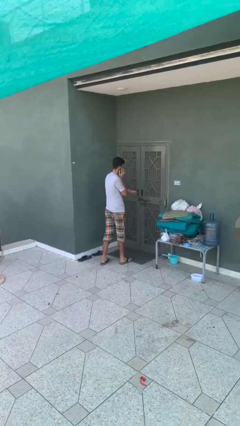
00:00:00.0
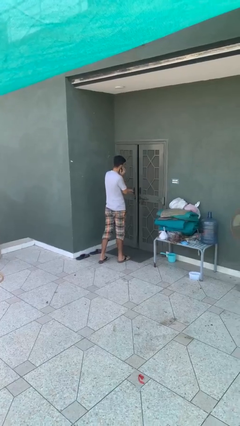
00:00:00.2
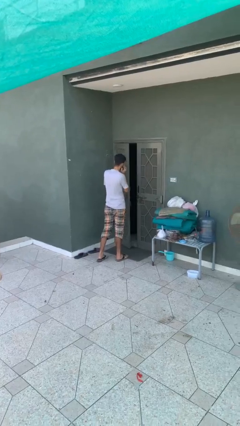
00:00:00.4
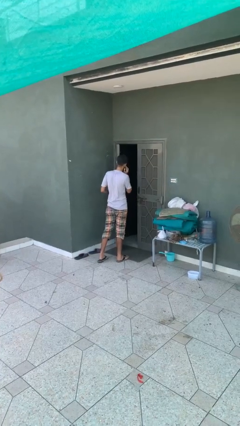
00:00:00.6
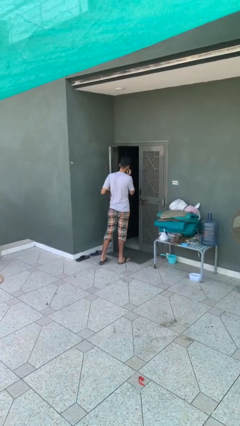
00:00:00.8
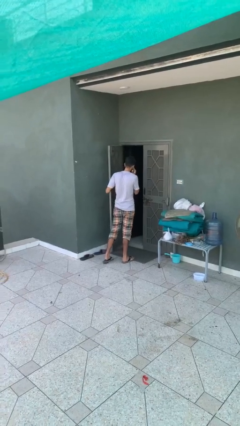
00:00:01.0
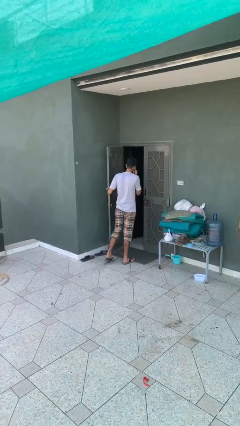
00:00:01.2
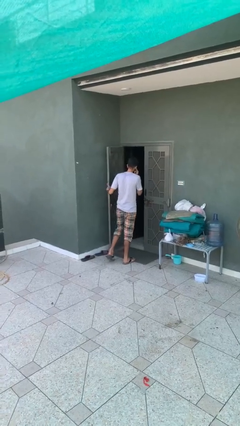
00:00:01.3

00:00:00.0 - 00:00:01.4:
person opens facility door

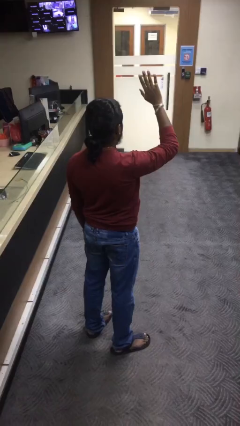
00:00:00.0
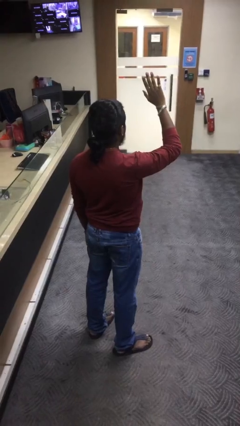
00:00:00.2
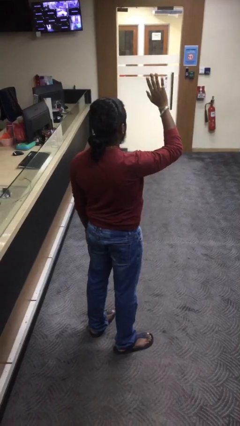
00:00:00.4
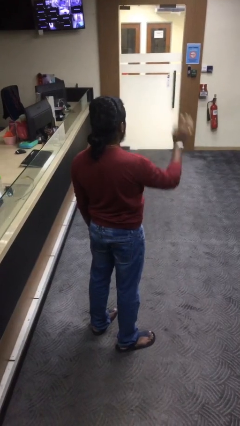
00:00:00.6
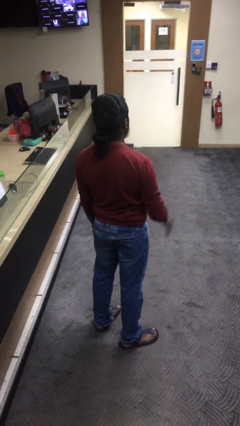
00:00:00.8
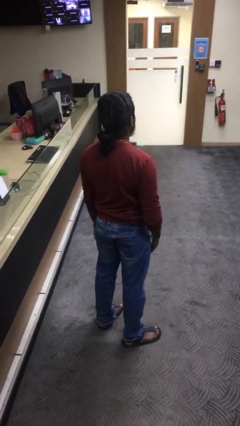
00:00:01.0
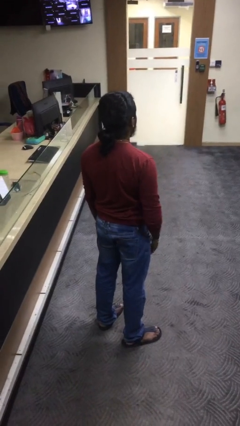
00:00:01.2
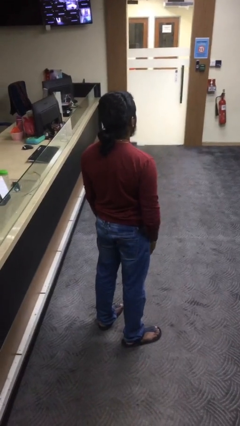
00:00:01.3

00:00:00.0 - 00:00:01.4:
person gestures lower hand

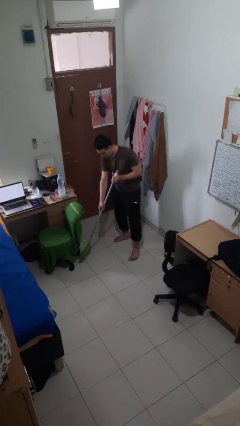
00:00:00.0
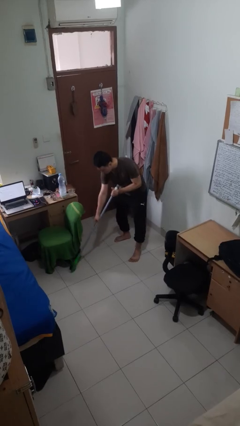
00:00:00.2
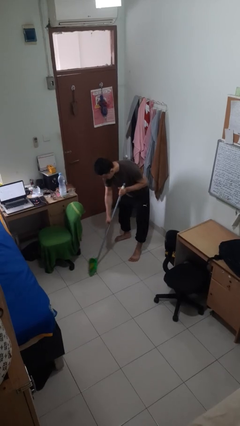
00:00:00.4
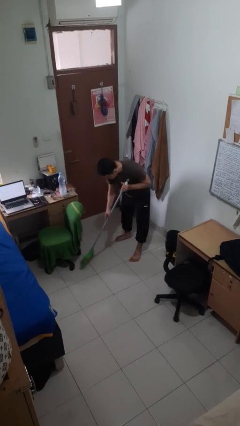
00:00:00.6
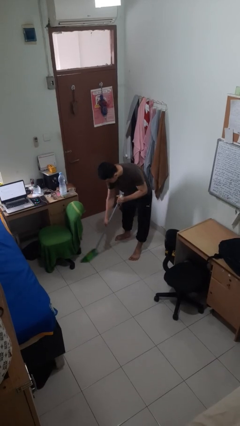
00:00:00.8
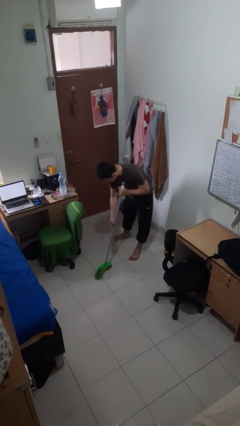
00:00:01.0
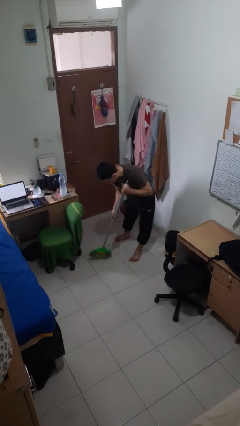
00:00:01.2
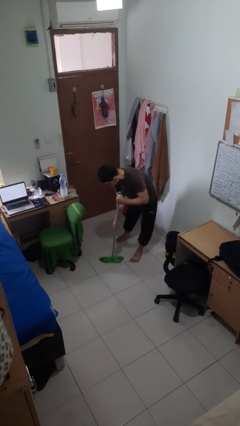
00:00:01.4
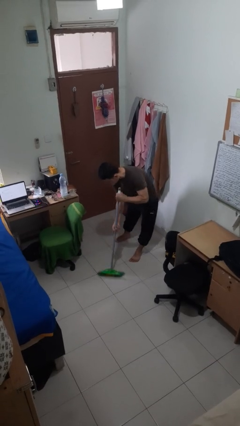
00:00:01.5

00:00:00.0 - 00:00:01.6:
person sweeps floor

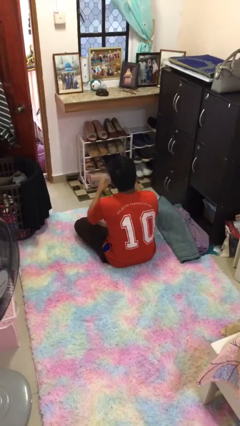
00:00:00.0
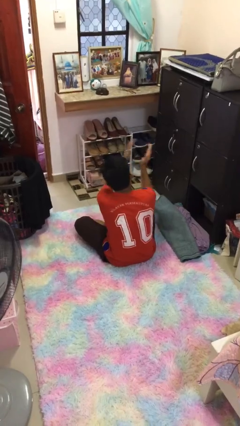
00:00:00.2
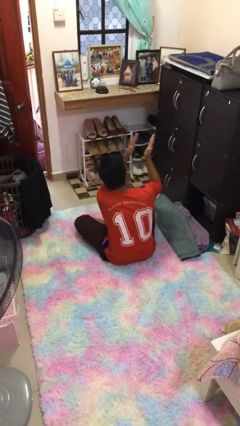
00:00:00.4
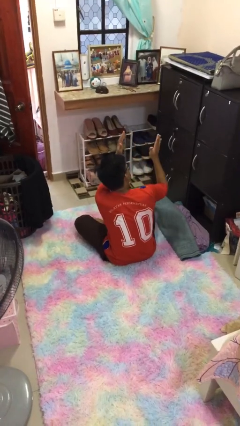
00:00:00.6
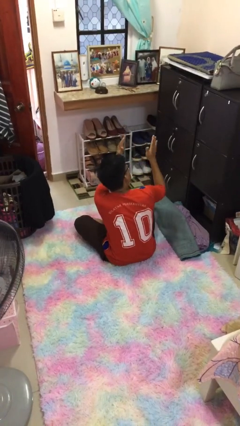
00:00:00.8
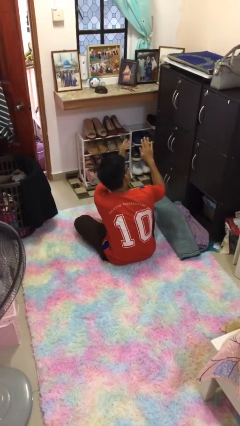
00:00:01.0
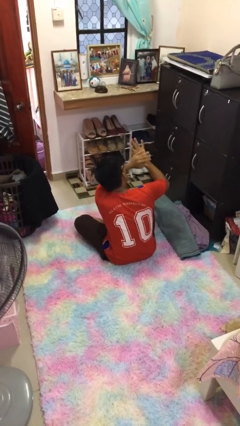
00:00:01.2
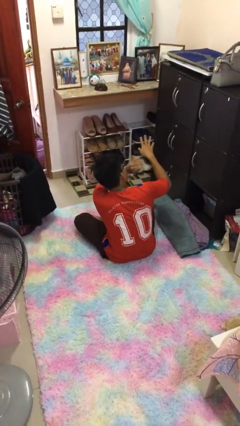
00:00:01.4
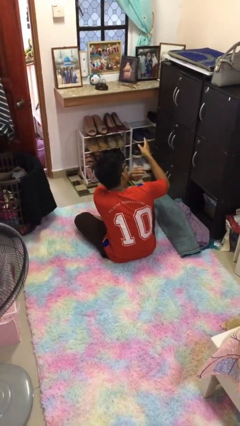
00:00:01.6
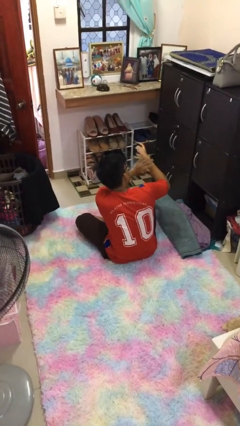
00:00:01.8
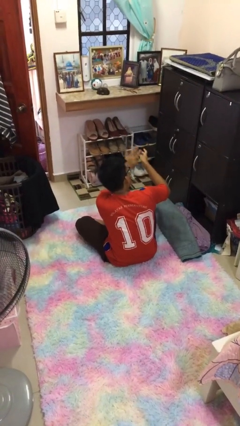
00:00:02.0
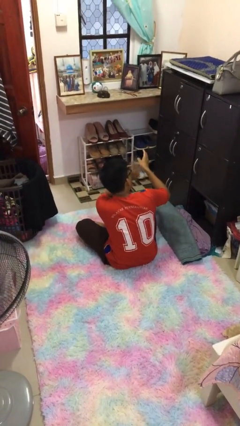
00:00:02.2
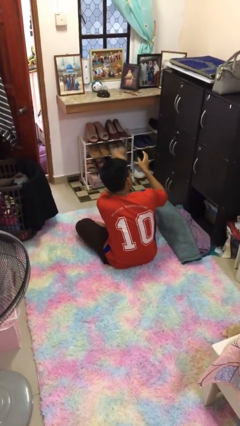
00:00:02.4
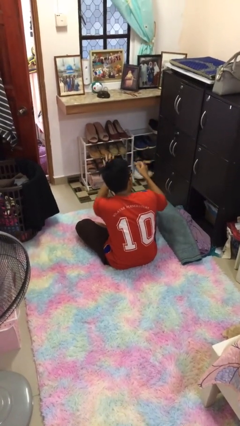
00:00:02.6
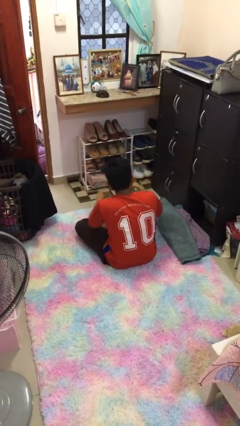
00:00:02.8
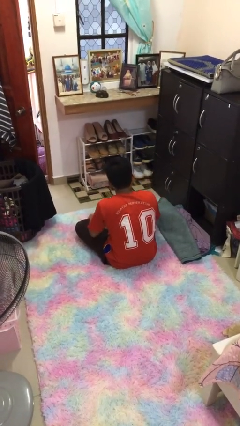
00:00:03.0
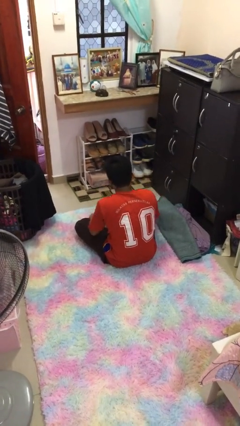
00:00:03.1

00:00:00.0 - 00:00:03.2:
person swats bug

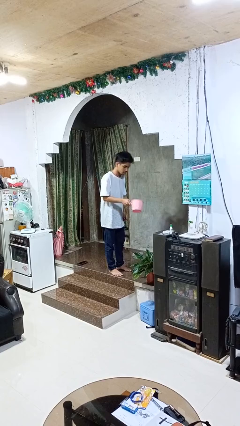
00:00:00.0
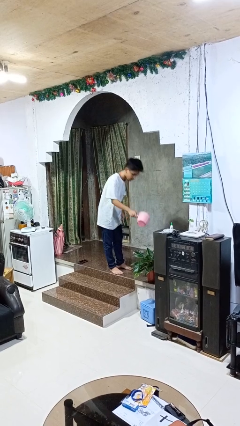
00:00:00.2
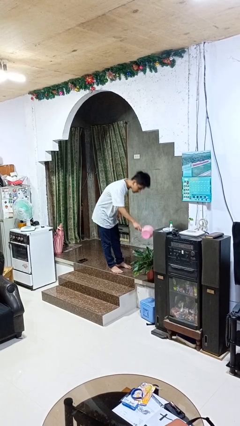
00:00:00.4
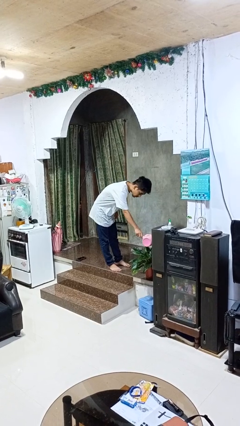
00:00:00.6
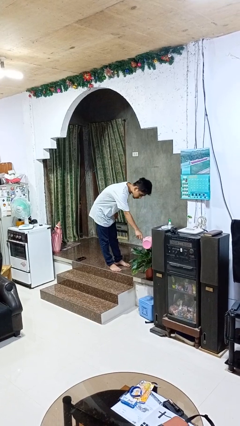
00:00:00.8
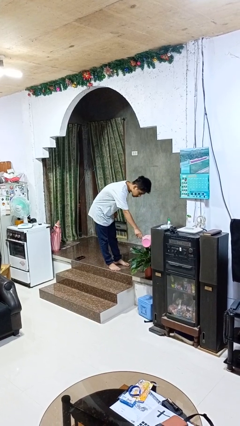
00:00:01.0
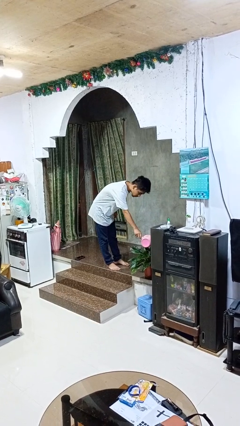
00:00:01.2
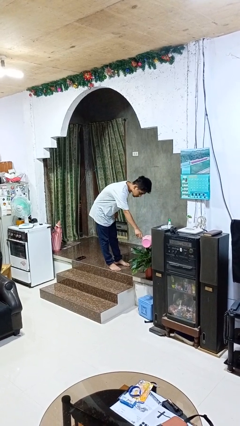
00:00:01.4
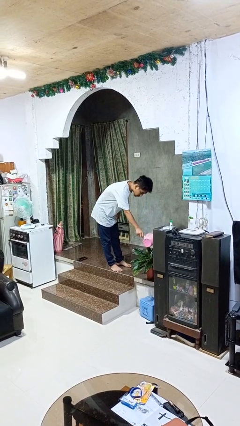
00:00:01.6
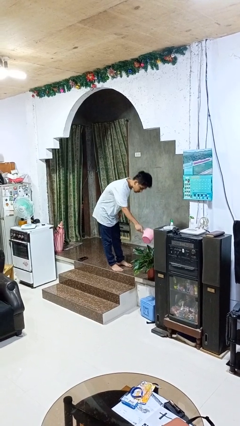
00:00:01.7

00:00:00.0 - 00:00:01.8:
person waters houseplant

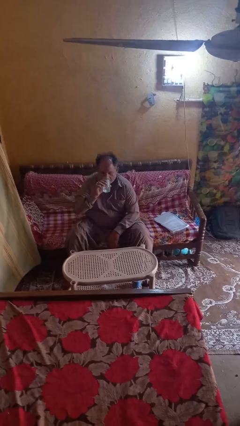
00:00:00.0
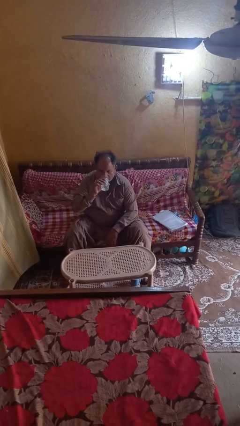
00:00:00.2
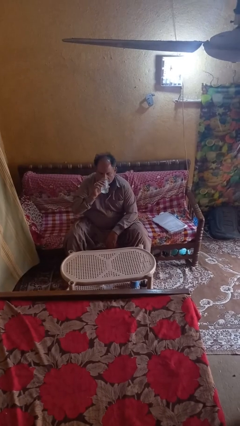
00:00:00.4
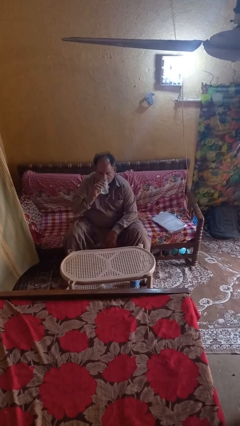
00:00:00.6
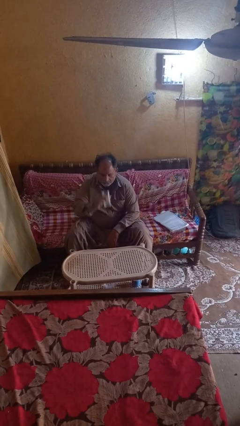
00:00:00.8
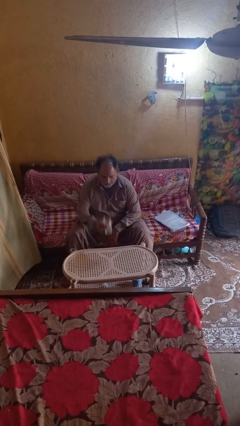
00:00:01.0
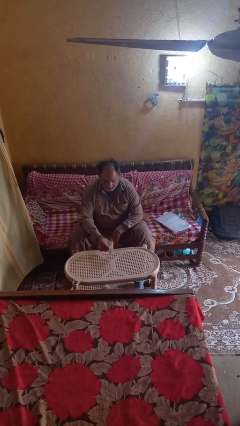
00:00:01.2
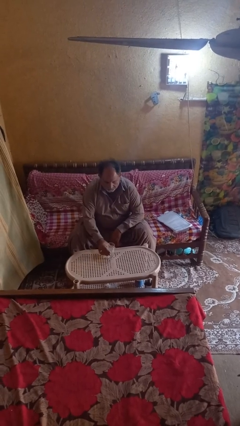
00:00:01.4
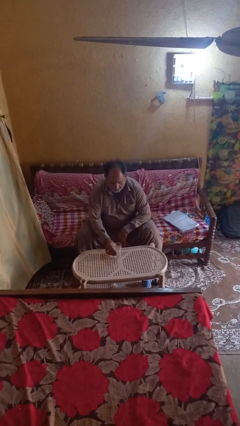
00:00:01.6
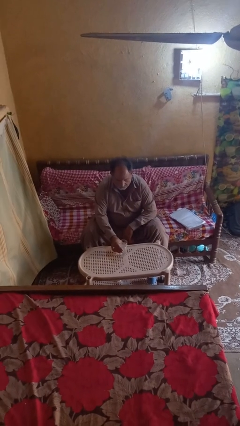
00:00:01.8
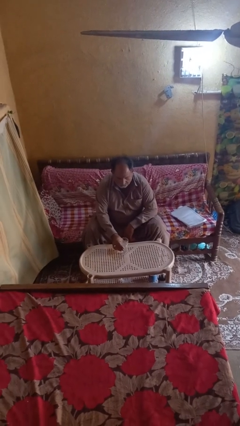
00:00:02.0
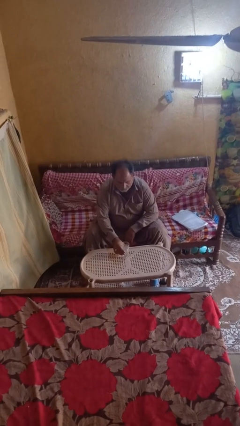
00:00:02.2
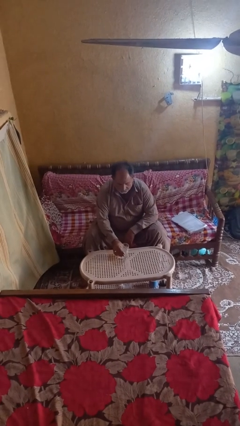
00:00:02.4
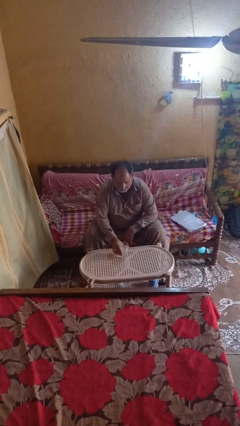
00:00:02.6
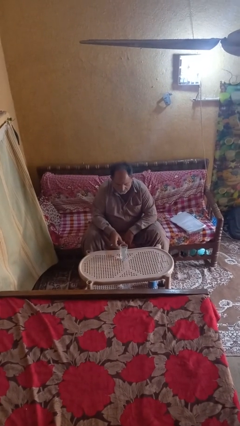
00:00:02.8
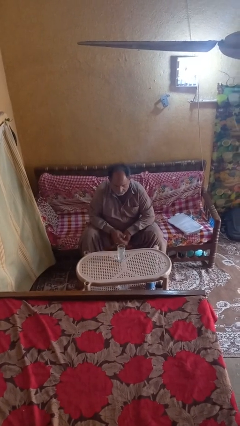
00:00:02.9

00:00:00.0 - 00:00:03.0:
person puts down object on table

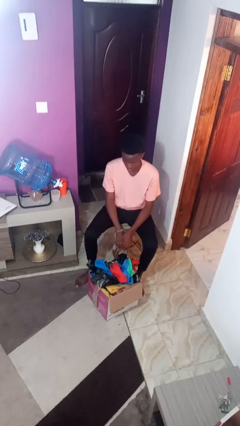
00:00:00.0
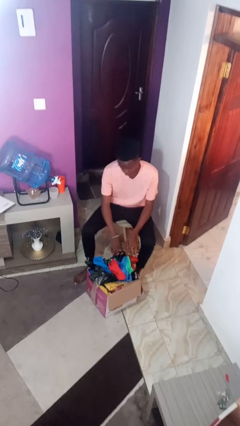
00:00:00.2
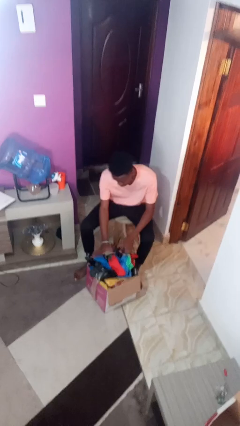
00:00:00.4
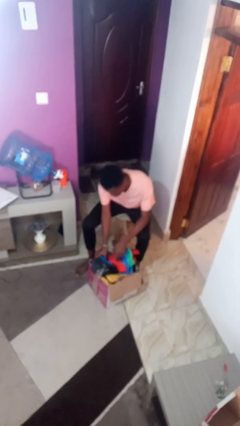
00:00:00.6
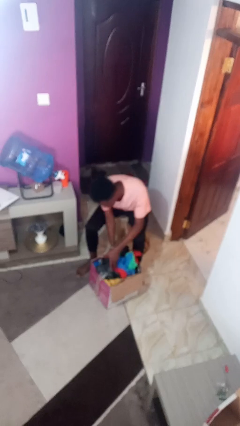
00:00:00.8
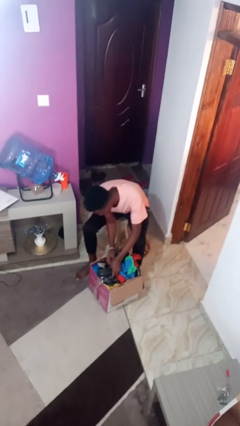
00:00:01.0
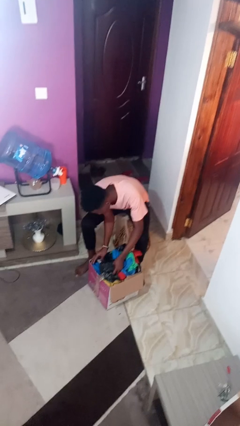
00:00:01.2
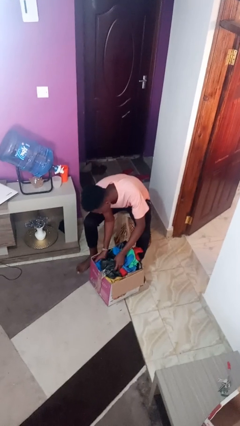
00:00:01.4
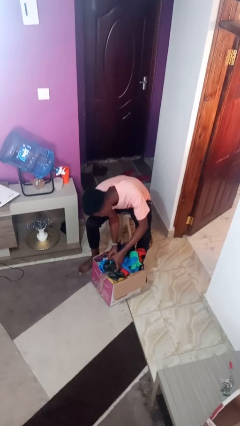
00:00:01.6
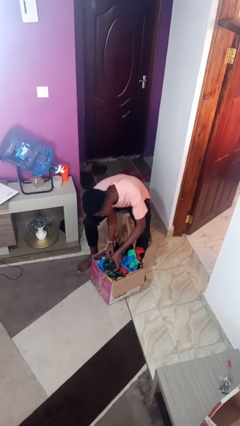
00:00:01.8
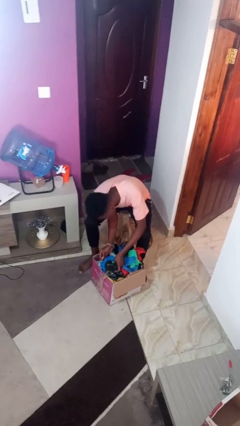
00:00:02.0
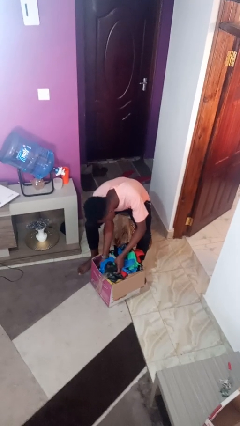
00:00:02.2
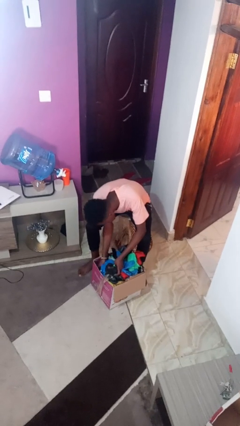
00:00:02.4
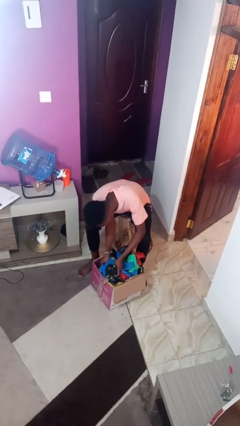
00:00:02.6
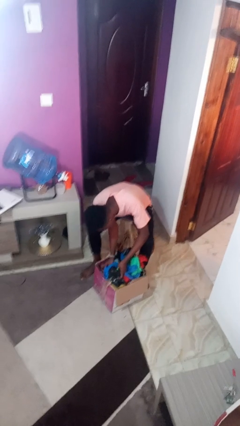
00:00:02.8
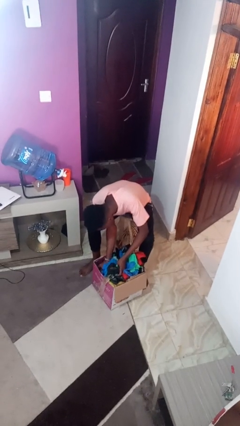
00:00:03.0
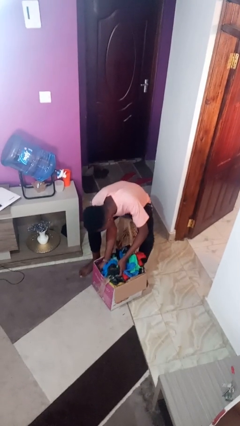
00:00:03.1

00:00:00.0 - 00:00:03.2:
person searches in box

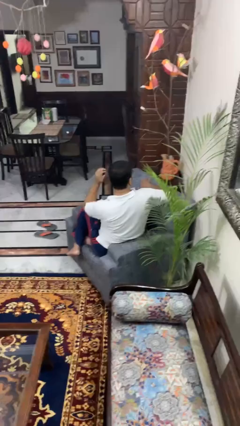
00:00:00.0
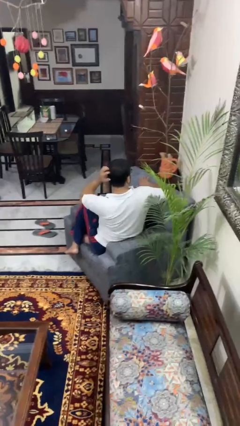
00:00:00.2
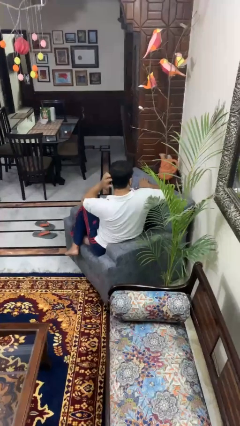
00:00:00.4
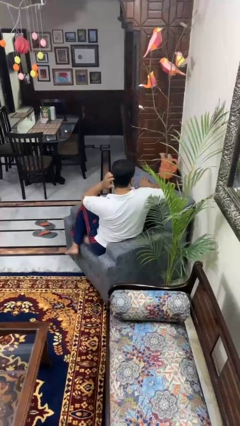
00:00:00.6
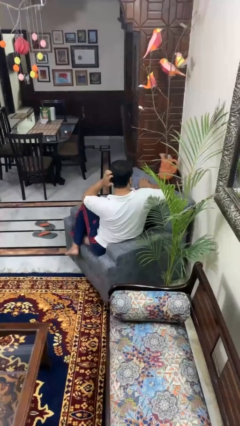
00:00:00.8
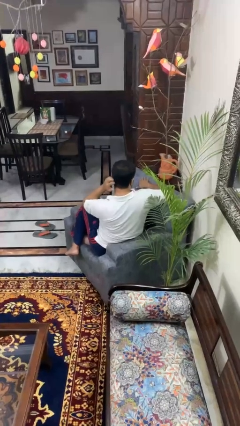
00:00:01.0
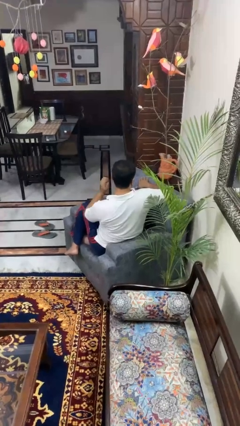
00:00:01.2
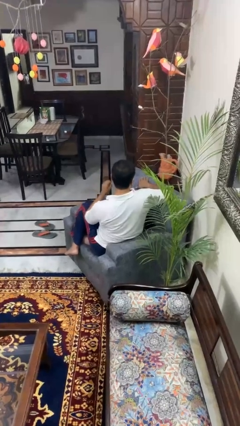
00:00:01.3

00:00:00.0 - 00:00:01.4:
person scratches face
